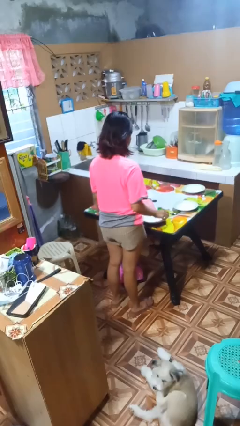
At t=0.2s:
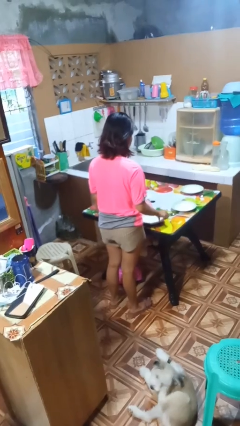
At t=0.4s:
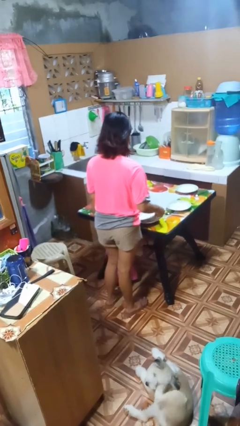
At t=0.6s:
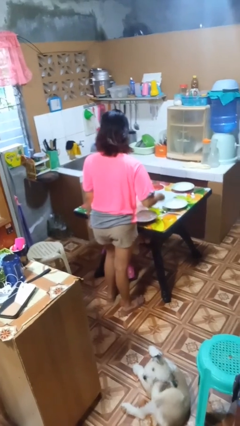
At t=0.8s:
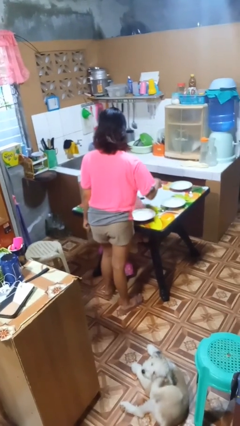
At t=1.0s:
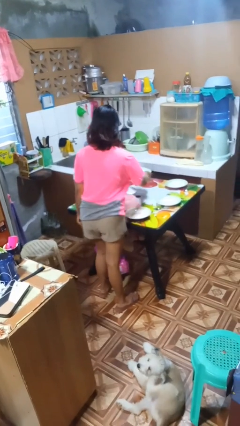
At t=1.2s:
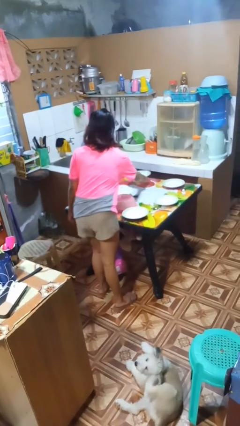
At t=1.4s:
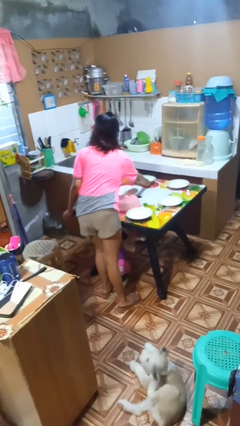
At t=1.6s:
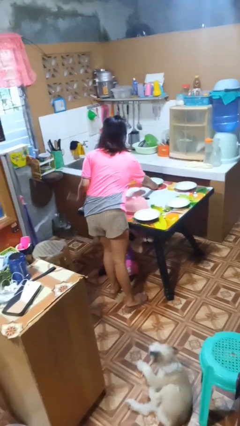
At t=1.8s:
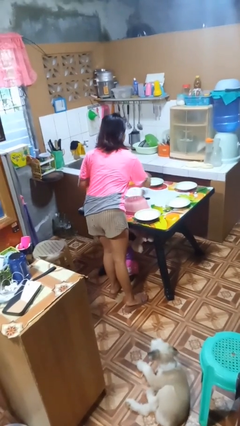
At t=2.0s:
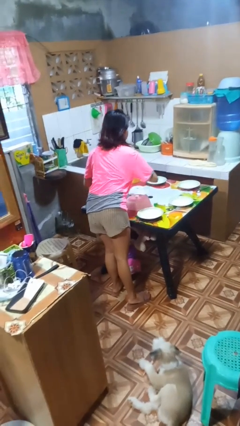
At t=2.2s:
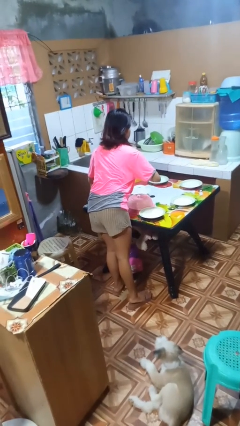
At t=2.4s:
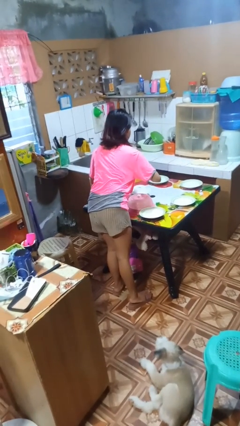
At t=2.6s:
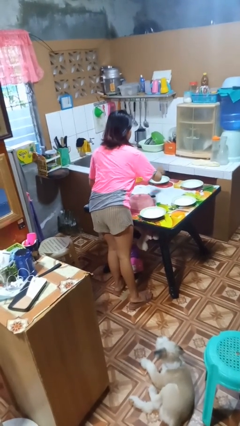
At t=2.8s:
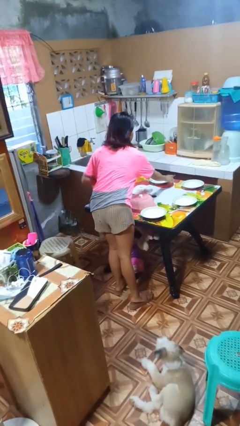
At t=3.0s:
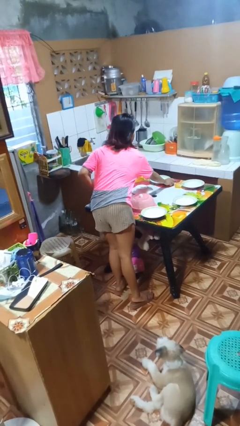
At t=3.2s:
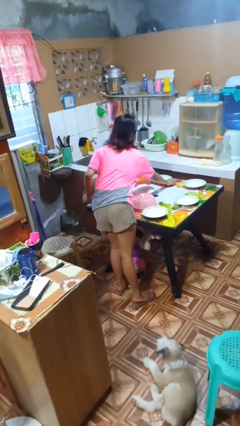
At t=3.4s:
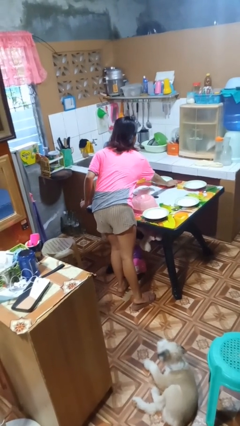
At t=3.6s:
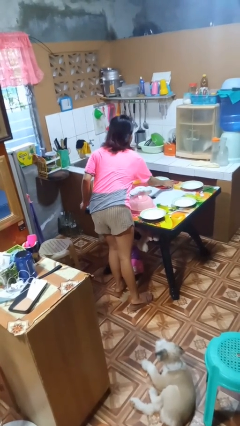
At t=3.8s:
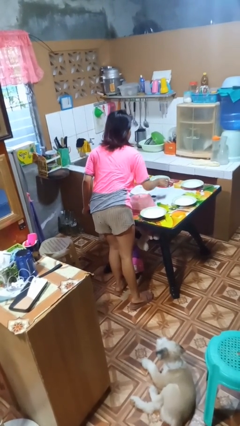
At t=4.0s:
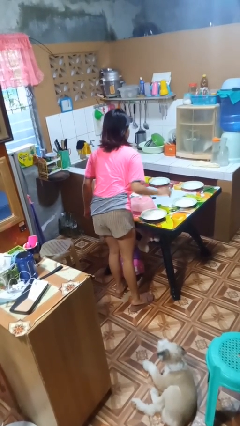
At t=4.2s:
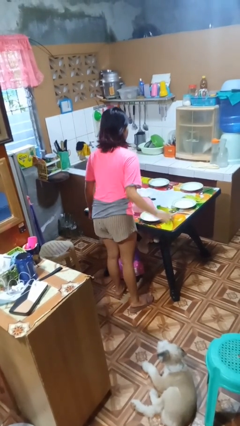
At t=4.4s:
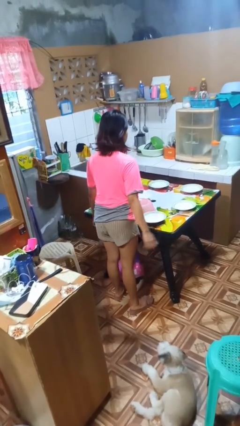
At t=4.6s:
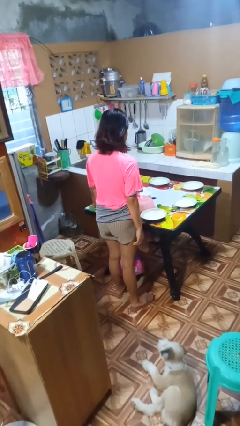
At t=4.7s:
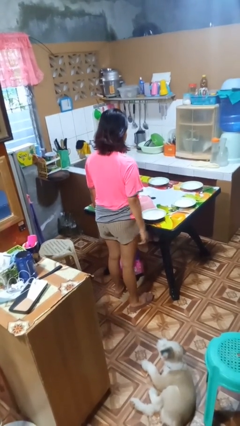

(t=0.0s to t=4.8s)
person sets table

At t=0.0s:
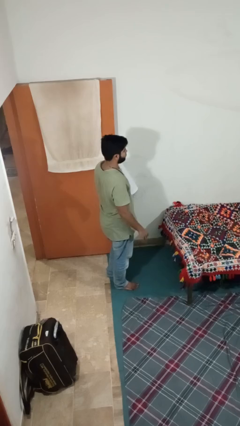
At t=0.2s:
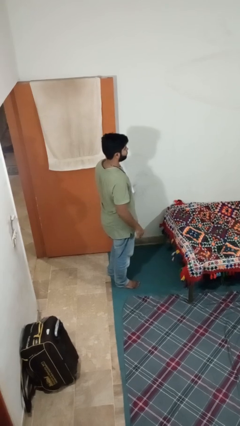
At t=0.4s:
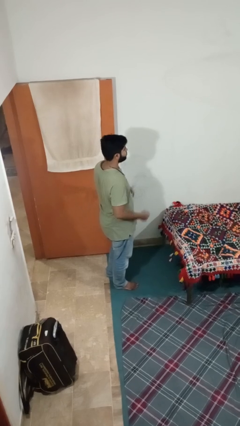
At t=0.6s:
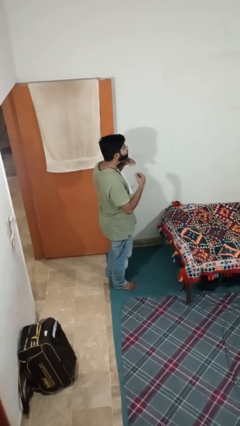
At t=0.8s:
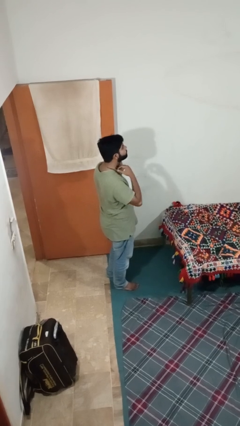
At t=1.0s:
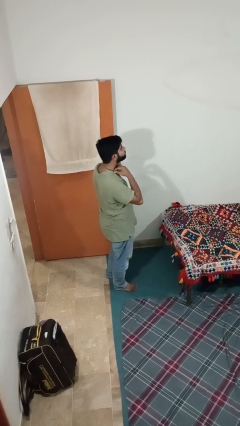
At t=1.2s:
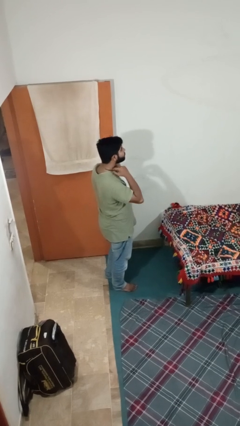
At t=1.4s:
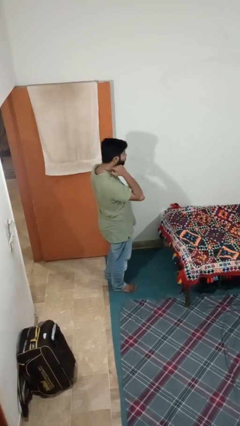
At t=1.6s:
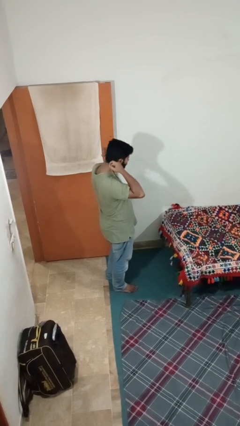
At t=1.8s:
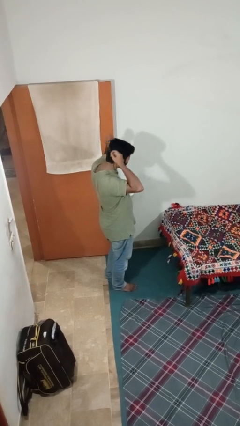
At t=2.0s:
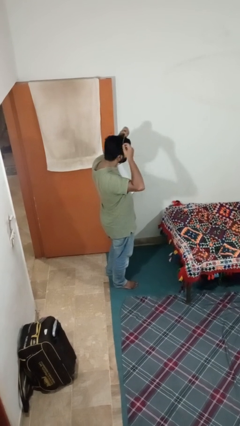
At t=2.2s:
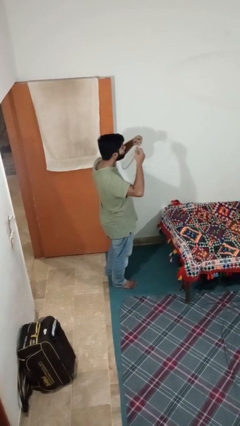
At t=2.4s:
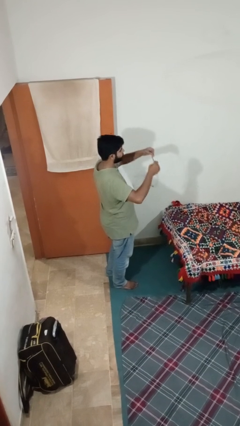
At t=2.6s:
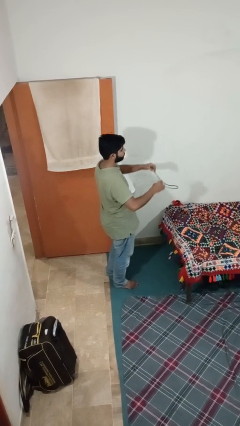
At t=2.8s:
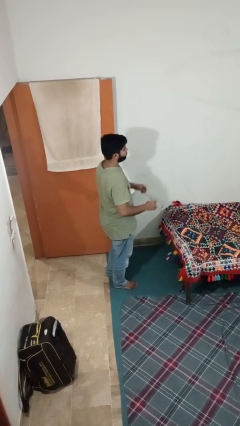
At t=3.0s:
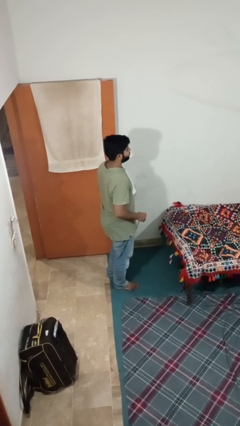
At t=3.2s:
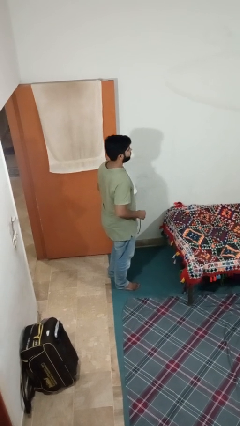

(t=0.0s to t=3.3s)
person takes off necklace

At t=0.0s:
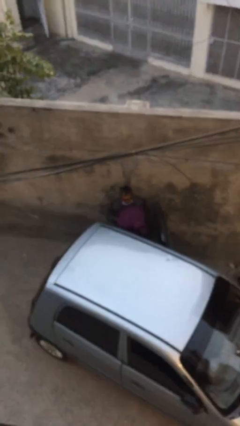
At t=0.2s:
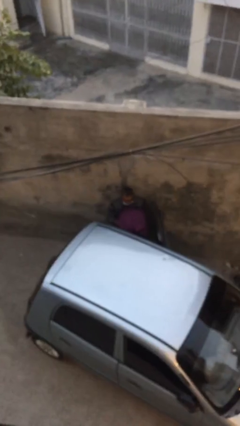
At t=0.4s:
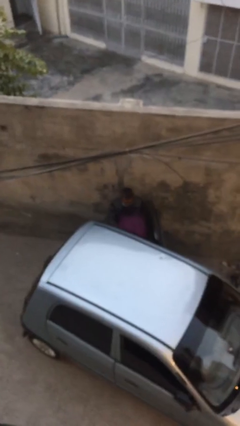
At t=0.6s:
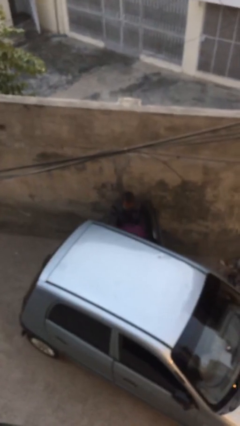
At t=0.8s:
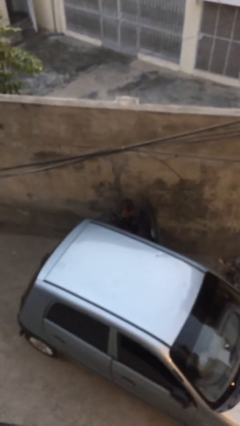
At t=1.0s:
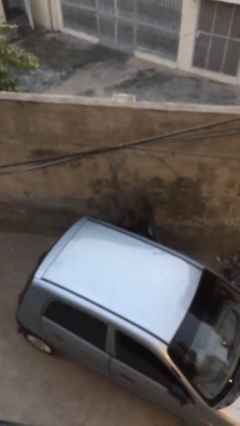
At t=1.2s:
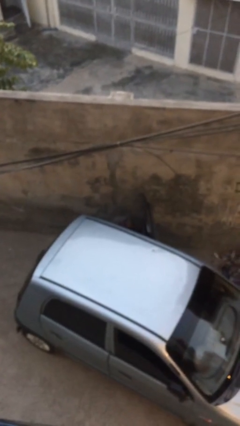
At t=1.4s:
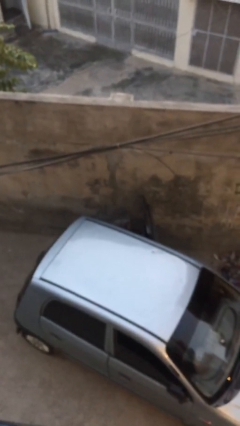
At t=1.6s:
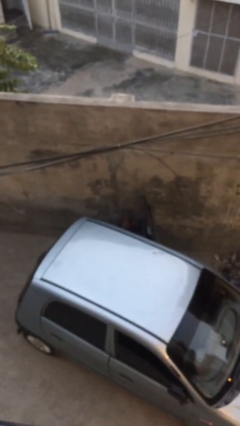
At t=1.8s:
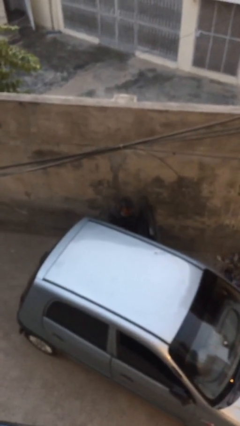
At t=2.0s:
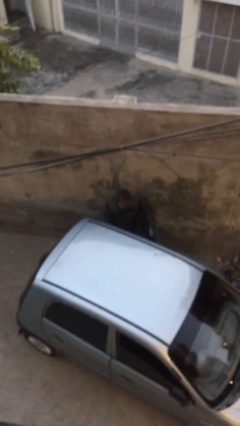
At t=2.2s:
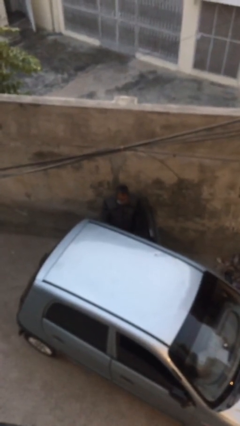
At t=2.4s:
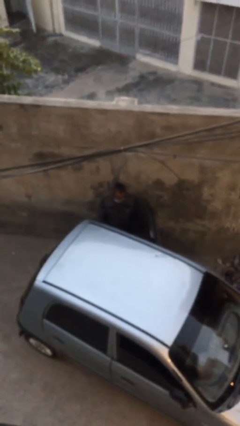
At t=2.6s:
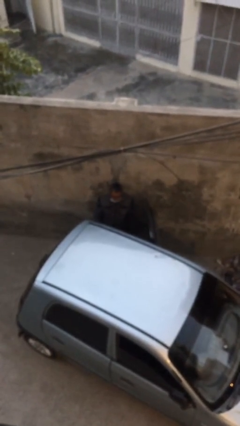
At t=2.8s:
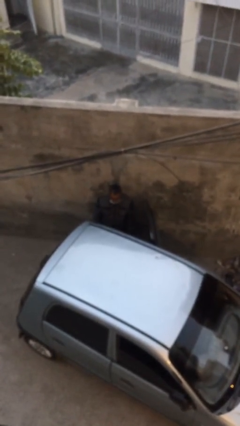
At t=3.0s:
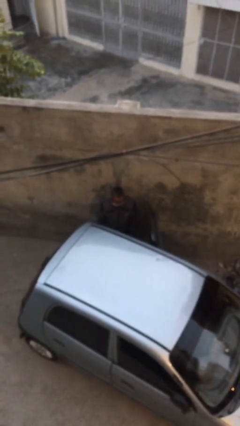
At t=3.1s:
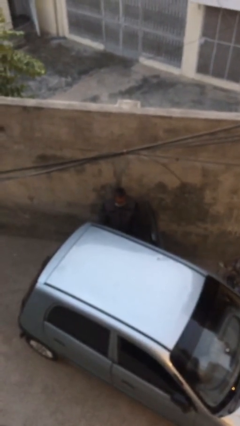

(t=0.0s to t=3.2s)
person loads car

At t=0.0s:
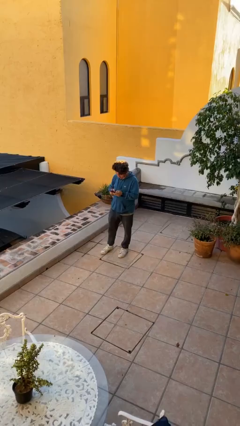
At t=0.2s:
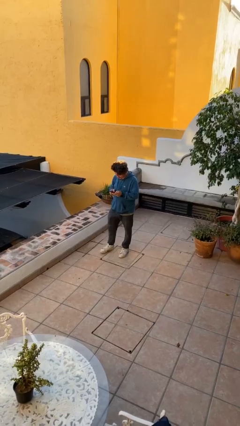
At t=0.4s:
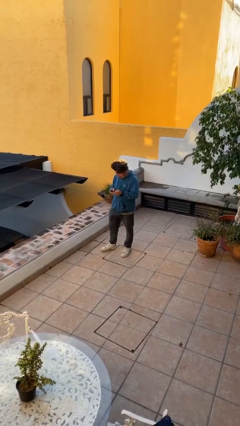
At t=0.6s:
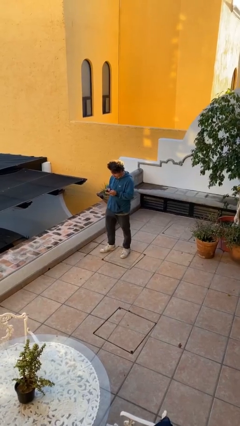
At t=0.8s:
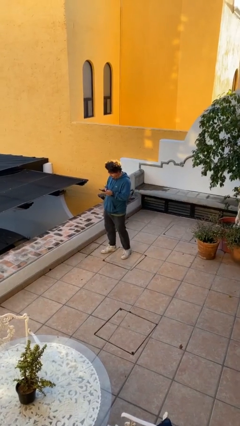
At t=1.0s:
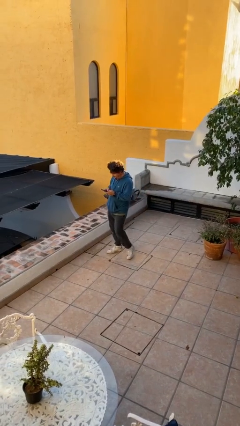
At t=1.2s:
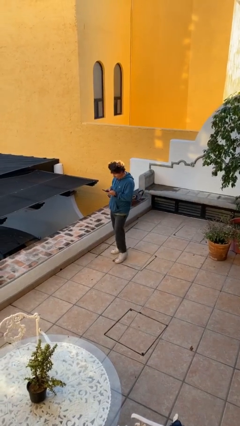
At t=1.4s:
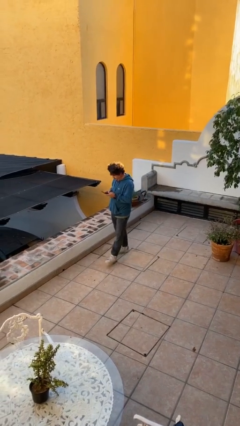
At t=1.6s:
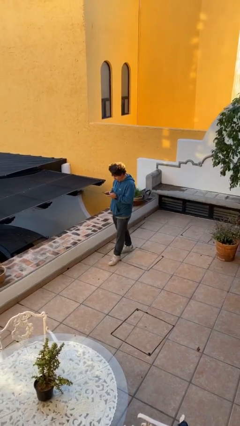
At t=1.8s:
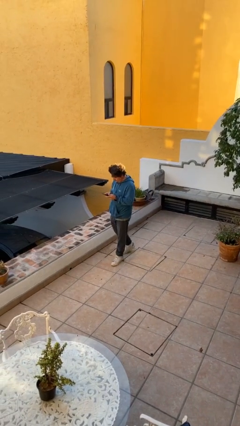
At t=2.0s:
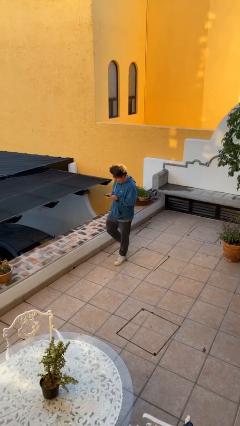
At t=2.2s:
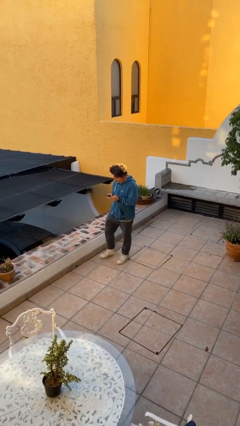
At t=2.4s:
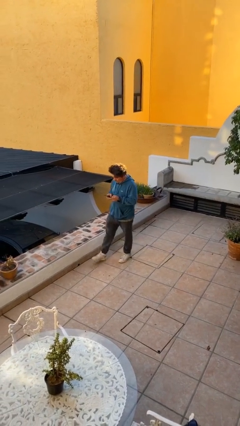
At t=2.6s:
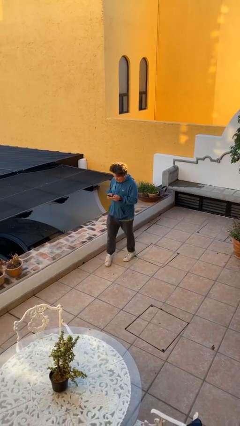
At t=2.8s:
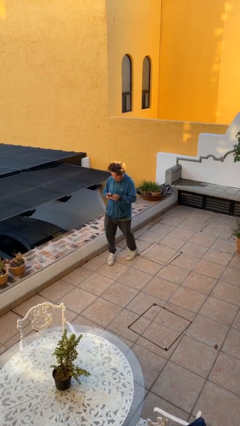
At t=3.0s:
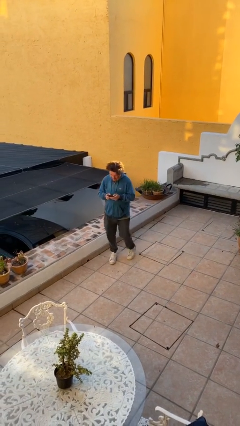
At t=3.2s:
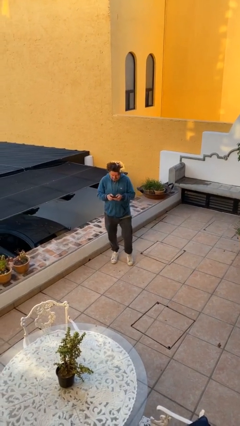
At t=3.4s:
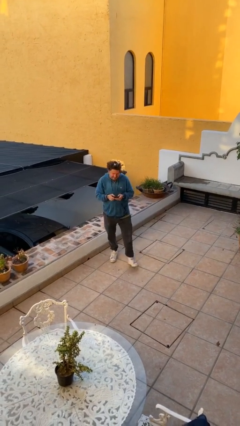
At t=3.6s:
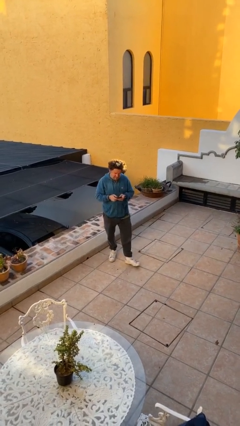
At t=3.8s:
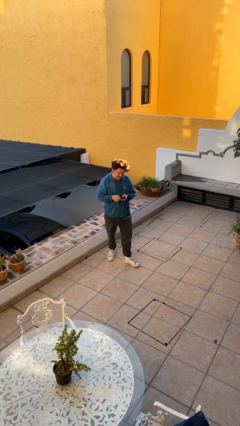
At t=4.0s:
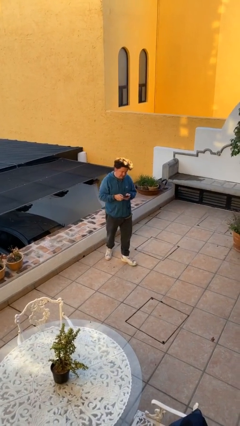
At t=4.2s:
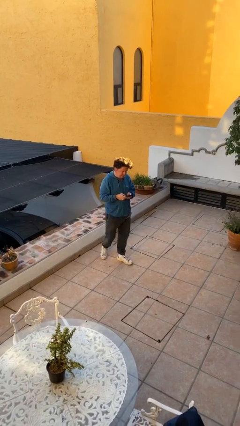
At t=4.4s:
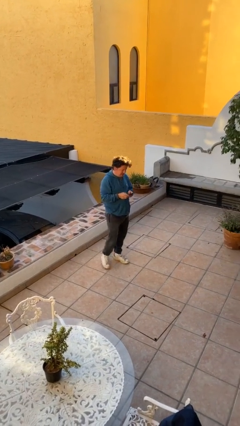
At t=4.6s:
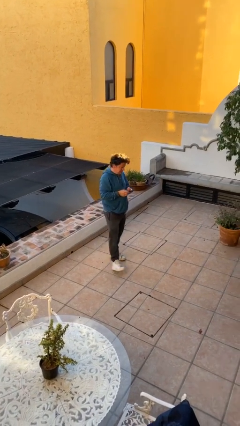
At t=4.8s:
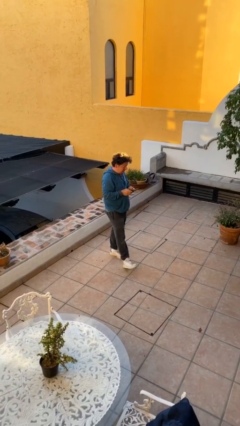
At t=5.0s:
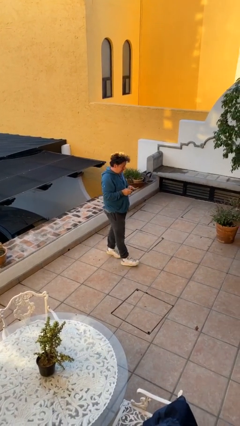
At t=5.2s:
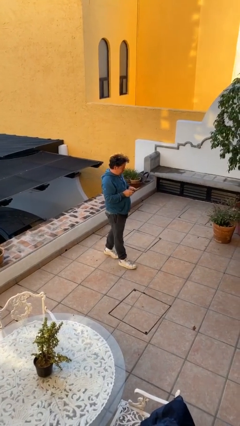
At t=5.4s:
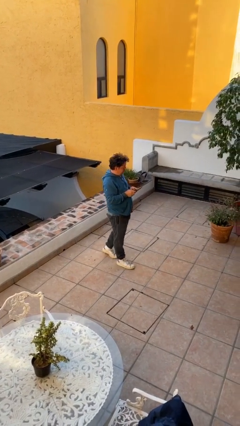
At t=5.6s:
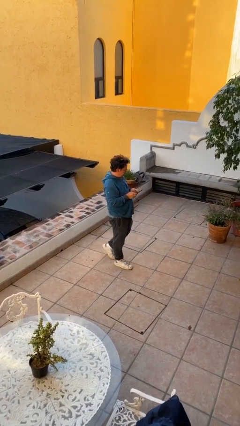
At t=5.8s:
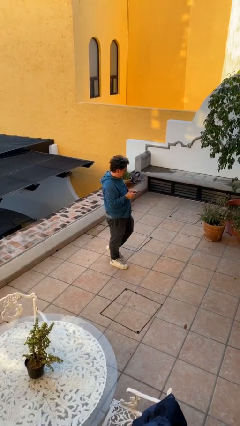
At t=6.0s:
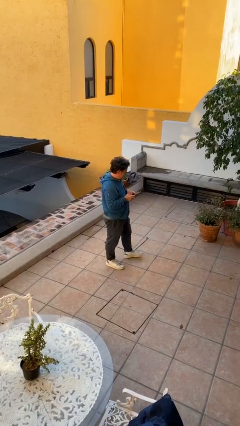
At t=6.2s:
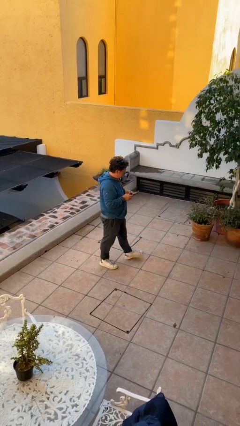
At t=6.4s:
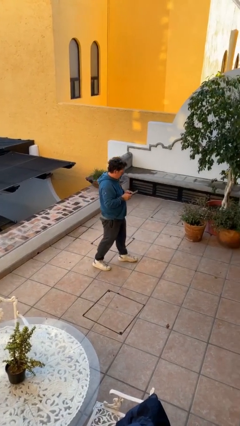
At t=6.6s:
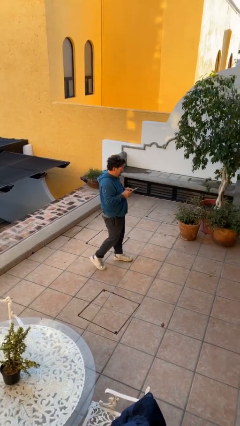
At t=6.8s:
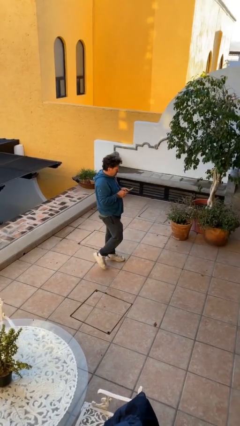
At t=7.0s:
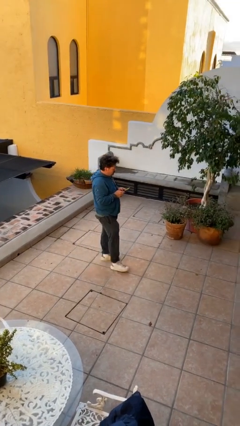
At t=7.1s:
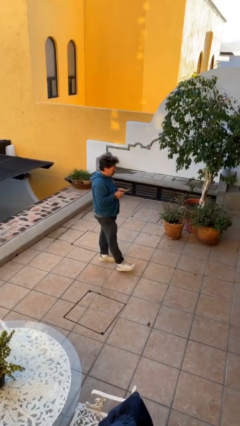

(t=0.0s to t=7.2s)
person texts on phone
